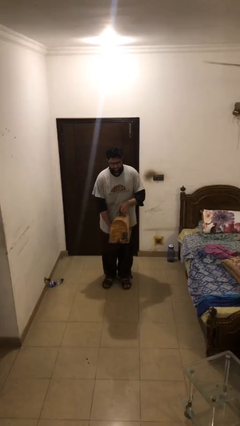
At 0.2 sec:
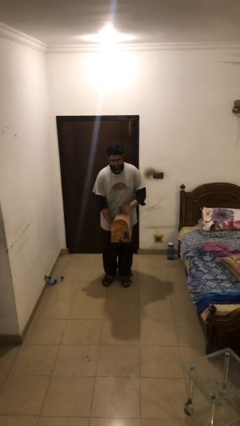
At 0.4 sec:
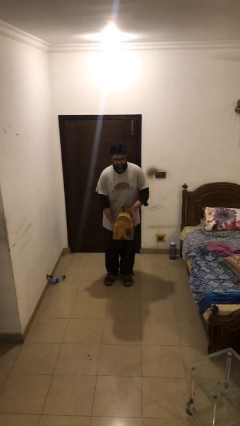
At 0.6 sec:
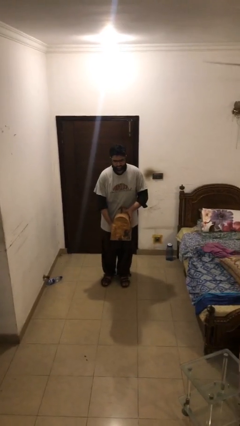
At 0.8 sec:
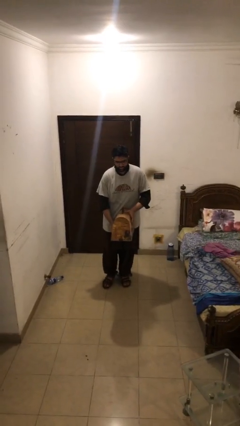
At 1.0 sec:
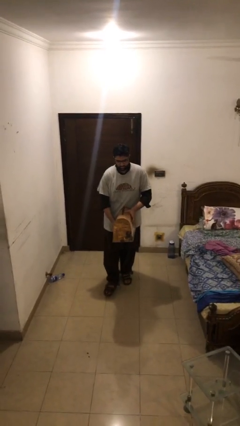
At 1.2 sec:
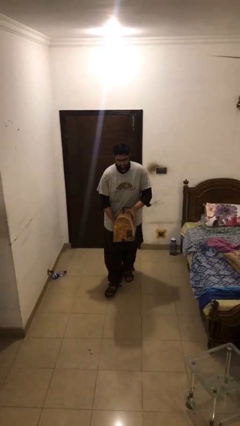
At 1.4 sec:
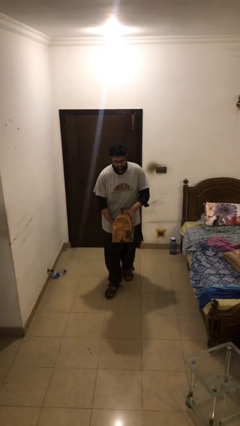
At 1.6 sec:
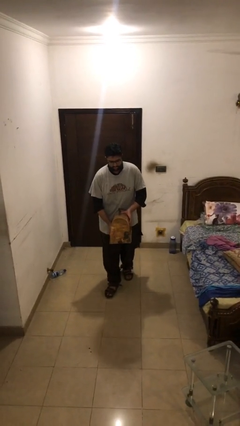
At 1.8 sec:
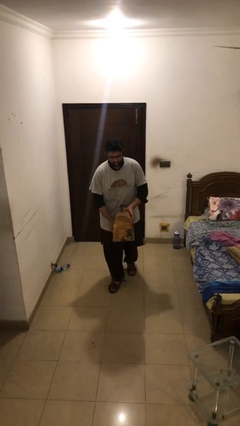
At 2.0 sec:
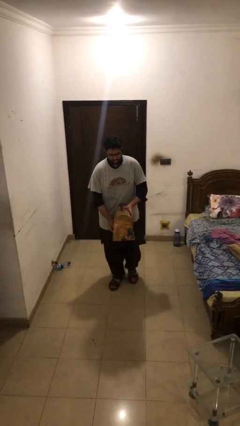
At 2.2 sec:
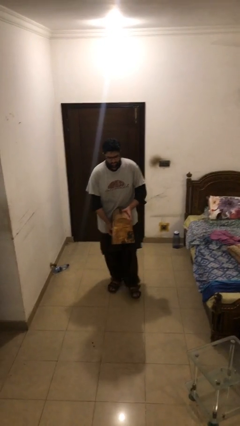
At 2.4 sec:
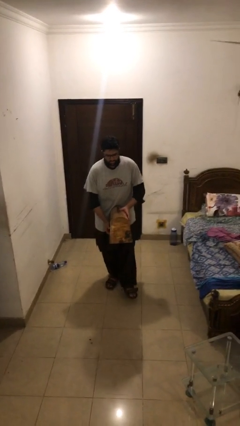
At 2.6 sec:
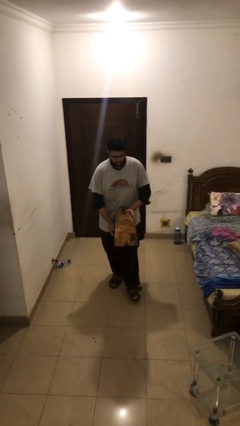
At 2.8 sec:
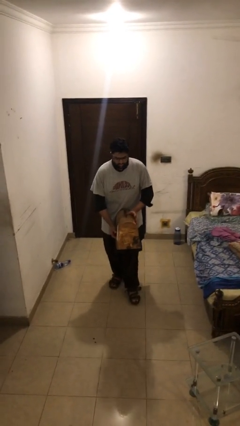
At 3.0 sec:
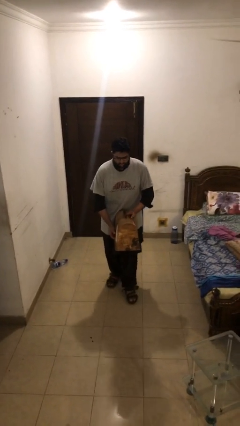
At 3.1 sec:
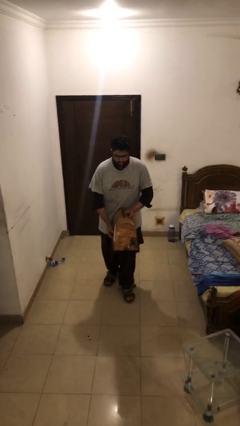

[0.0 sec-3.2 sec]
person carries heavy object

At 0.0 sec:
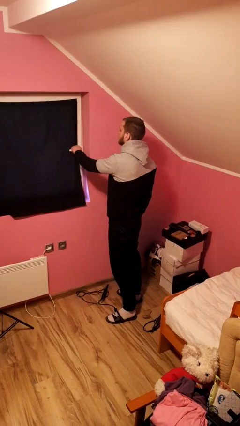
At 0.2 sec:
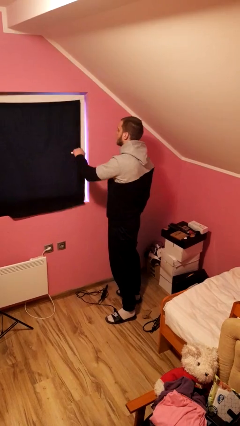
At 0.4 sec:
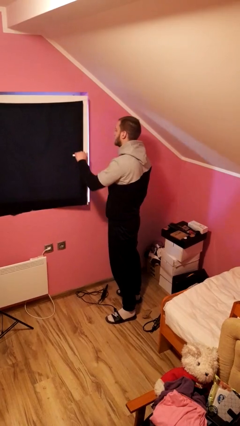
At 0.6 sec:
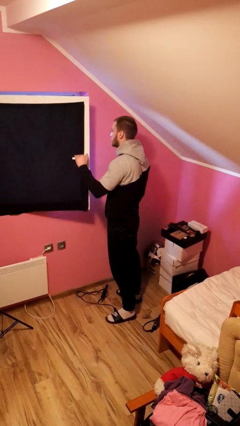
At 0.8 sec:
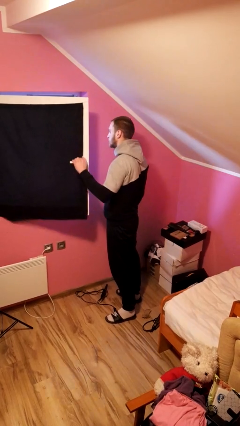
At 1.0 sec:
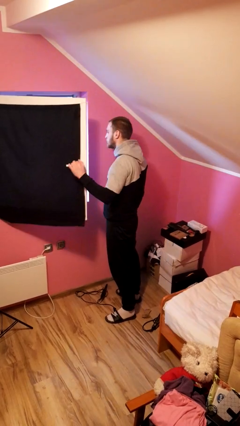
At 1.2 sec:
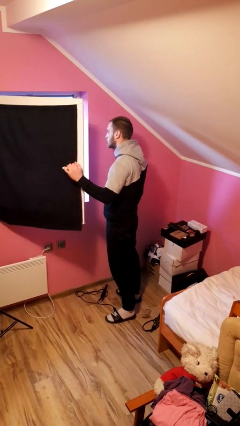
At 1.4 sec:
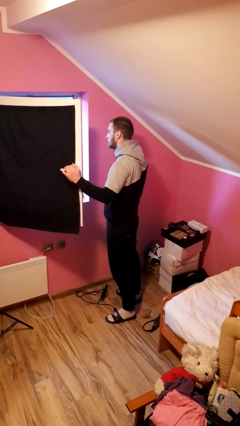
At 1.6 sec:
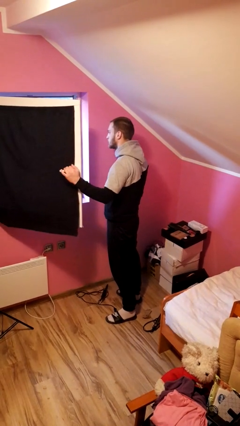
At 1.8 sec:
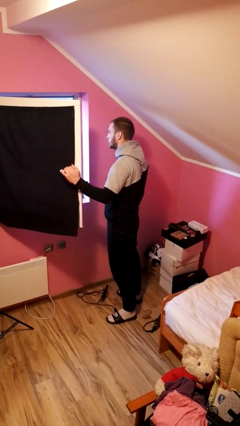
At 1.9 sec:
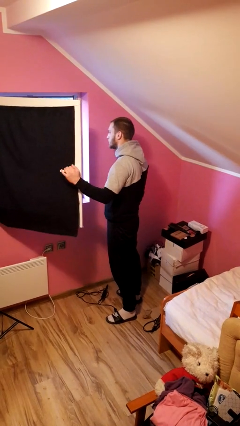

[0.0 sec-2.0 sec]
person opens home window

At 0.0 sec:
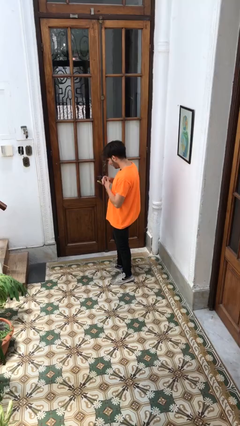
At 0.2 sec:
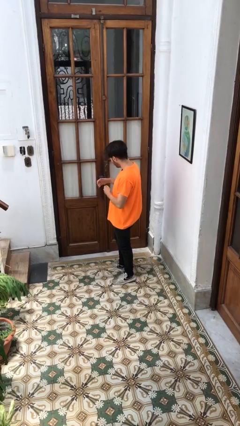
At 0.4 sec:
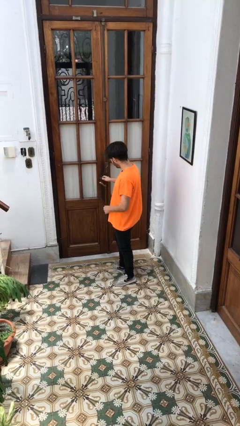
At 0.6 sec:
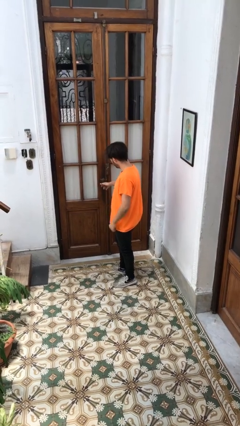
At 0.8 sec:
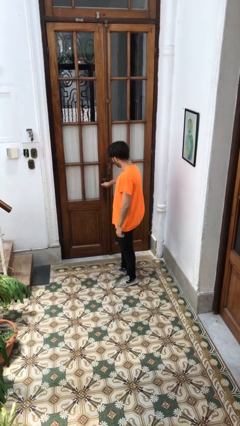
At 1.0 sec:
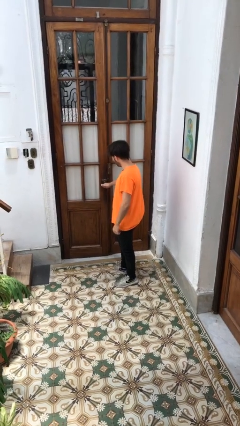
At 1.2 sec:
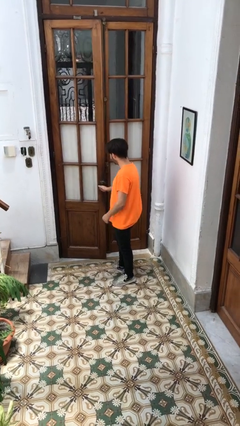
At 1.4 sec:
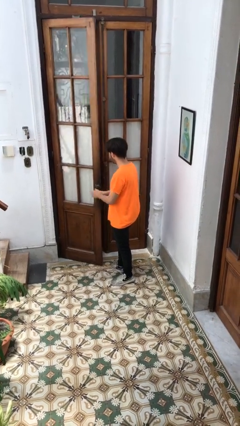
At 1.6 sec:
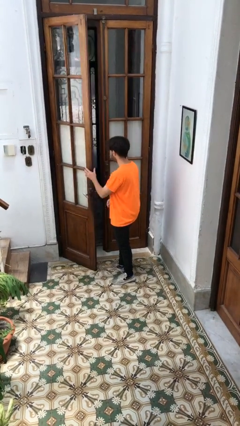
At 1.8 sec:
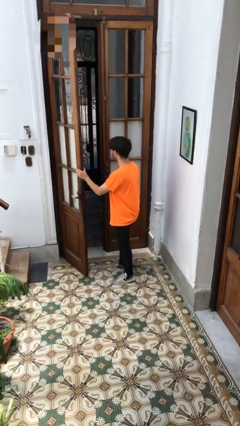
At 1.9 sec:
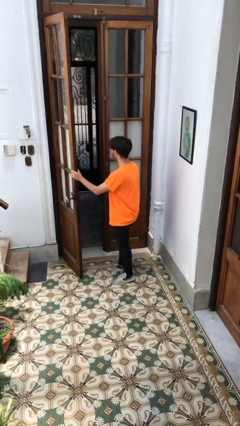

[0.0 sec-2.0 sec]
person opens facility door

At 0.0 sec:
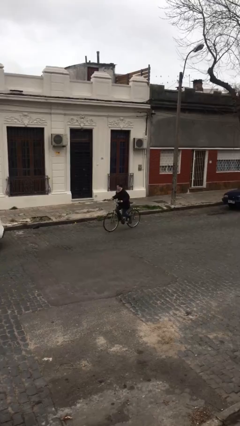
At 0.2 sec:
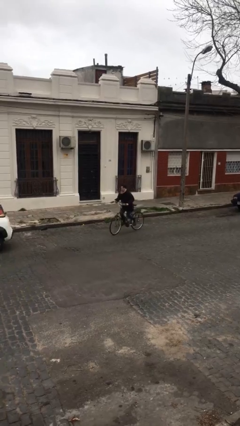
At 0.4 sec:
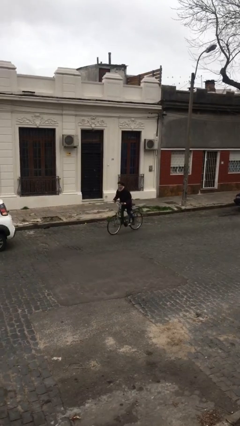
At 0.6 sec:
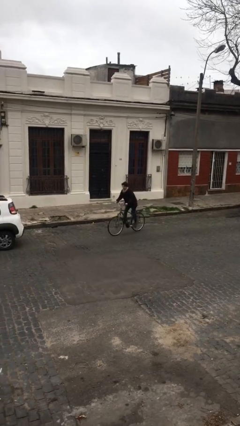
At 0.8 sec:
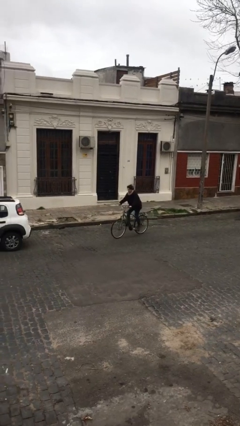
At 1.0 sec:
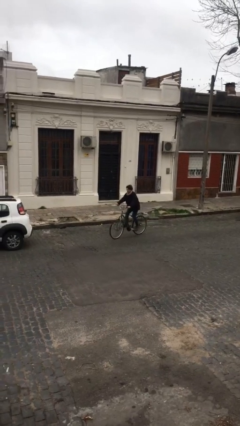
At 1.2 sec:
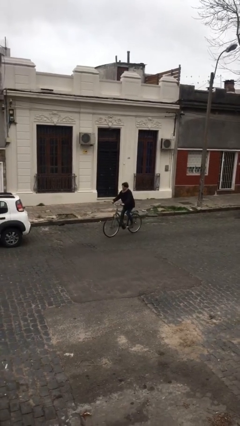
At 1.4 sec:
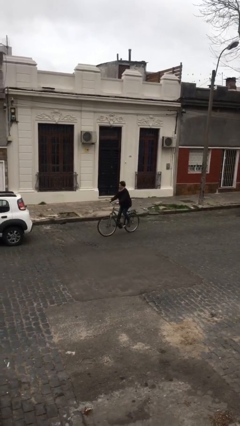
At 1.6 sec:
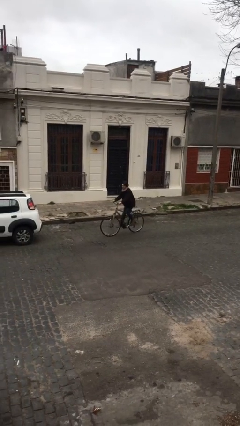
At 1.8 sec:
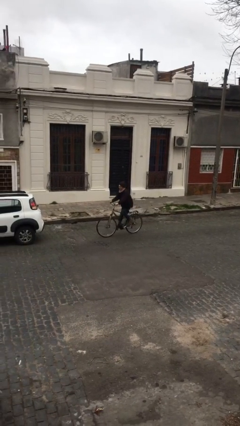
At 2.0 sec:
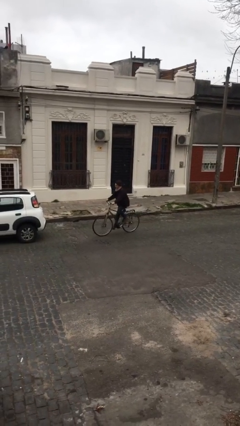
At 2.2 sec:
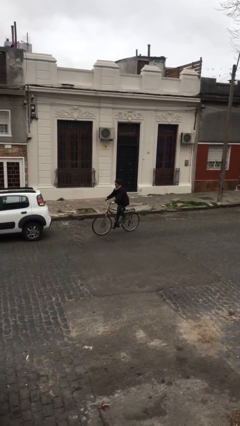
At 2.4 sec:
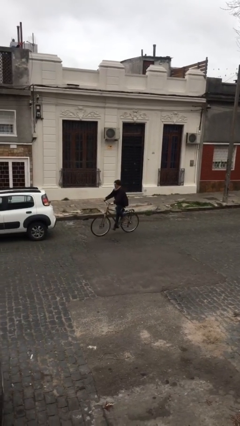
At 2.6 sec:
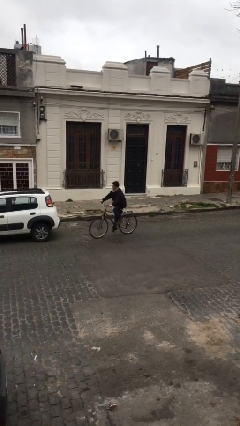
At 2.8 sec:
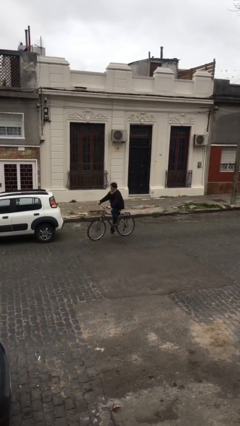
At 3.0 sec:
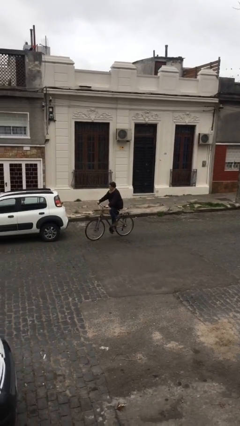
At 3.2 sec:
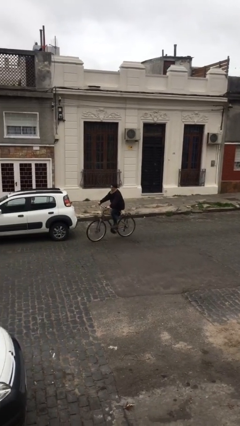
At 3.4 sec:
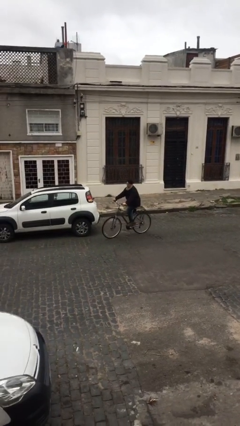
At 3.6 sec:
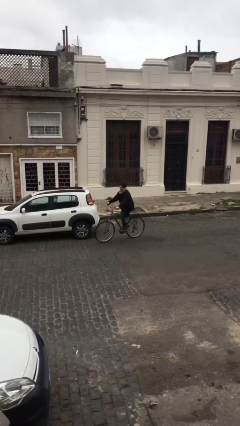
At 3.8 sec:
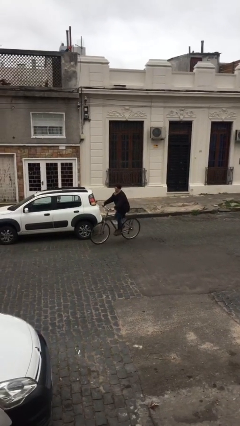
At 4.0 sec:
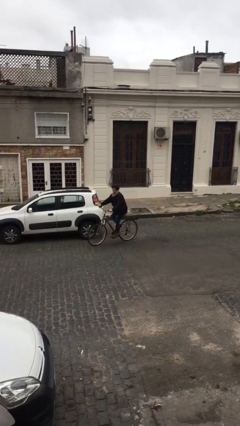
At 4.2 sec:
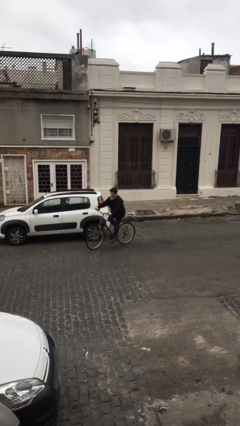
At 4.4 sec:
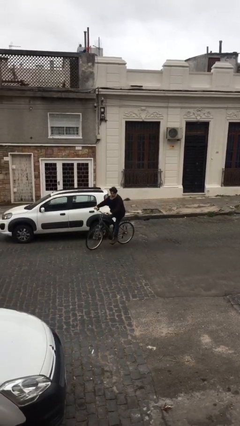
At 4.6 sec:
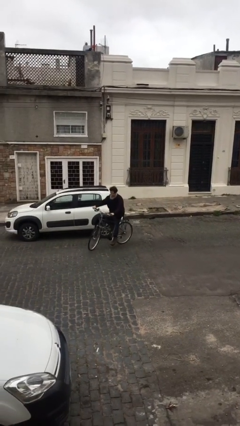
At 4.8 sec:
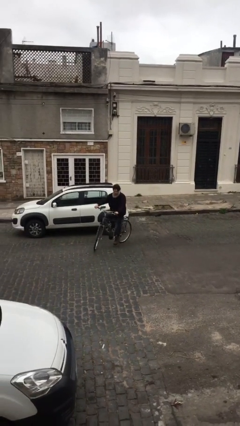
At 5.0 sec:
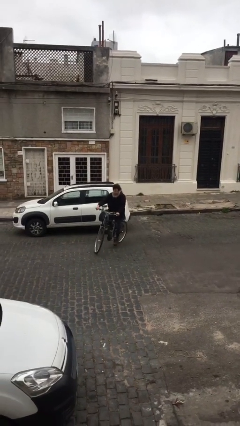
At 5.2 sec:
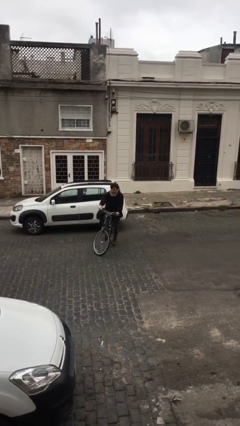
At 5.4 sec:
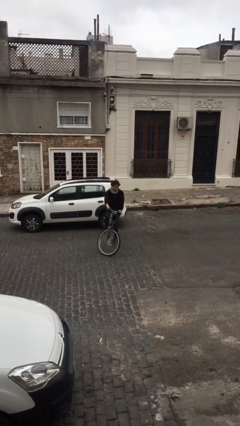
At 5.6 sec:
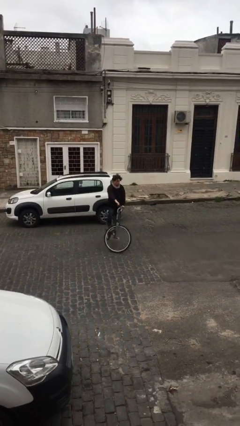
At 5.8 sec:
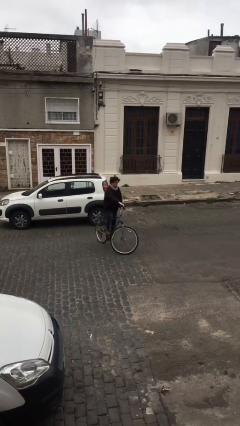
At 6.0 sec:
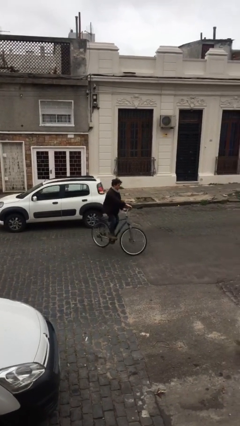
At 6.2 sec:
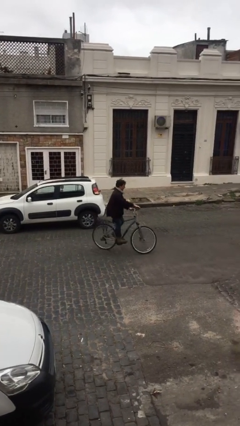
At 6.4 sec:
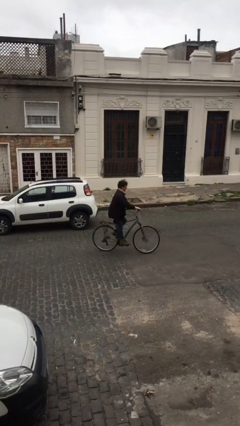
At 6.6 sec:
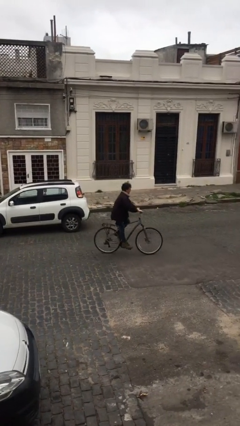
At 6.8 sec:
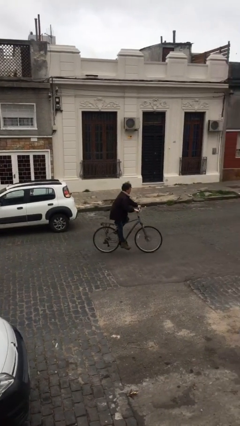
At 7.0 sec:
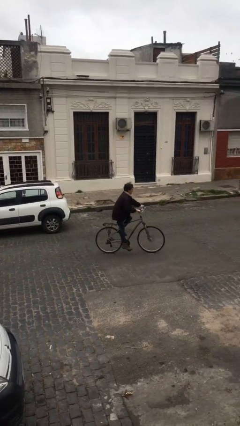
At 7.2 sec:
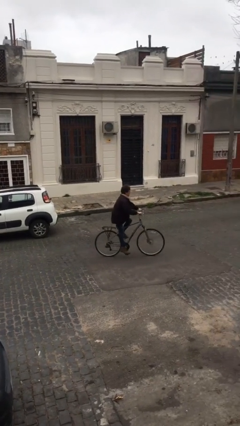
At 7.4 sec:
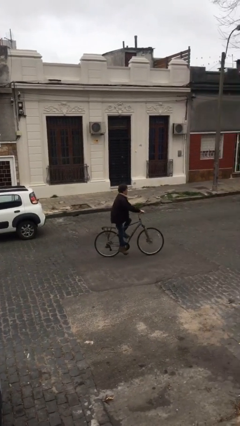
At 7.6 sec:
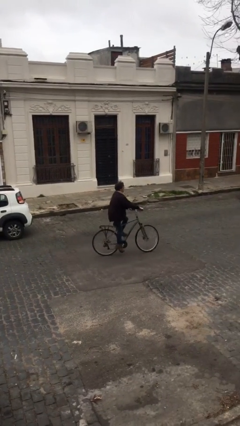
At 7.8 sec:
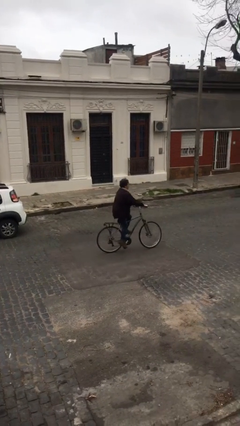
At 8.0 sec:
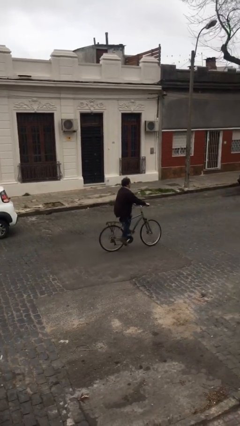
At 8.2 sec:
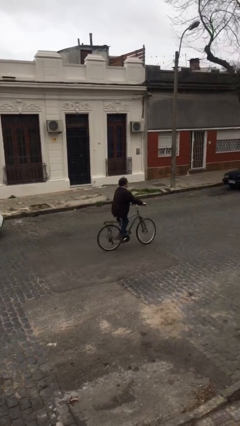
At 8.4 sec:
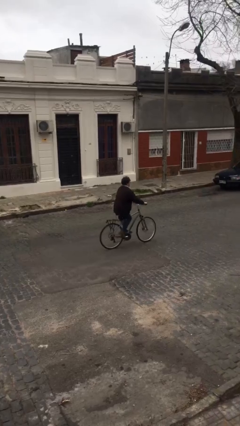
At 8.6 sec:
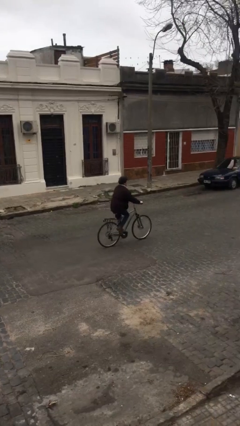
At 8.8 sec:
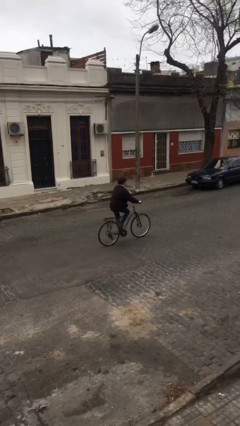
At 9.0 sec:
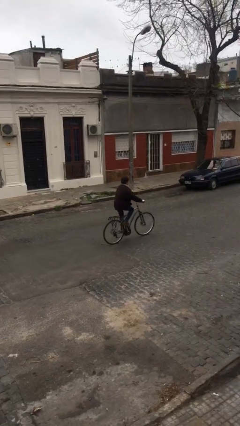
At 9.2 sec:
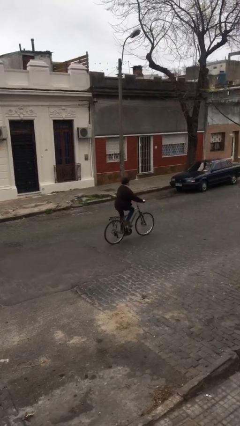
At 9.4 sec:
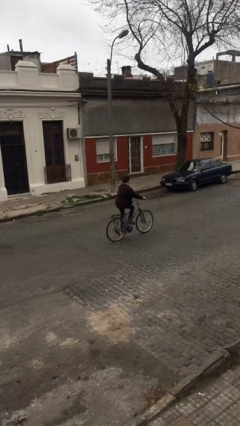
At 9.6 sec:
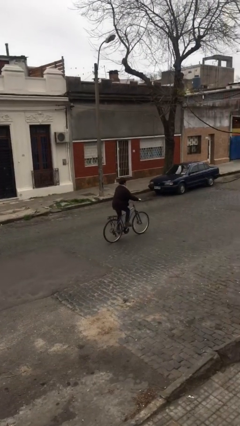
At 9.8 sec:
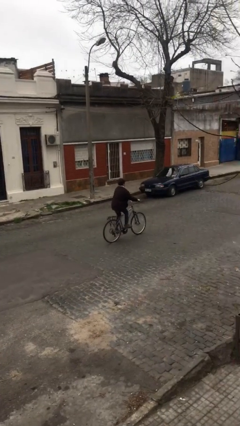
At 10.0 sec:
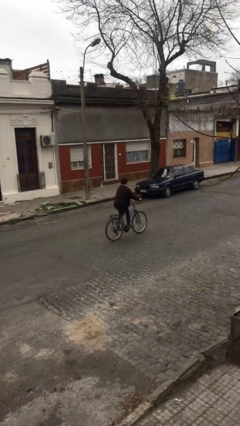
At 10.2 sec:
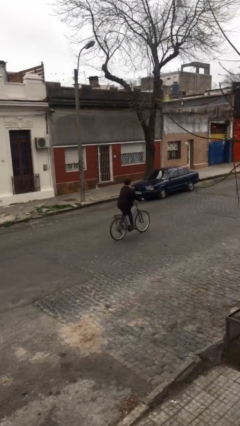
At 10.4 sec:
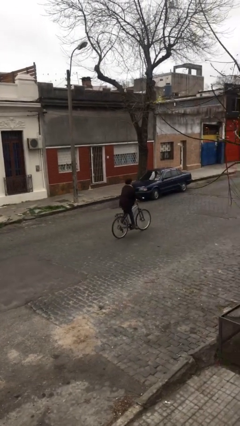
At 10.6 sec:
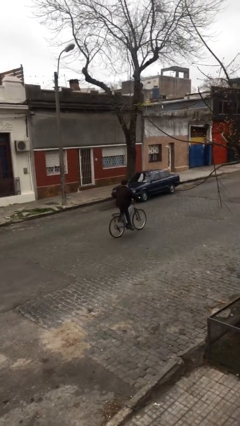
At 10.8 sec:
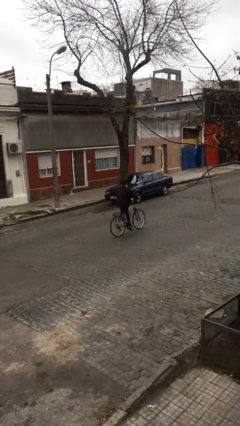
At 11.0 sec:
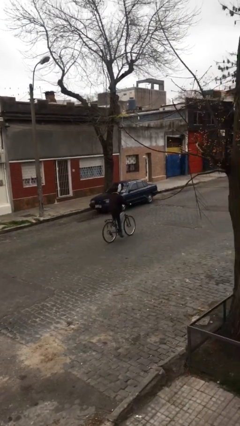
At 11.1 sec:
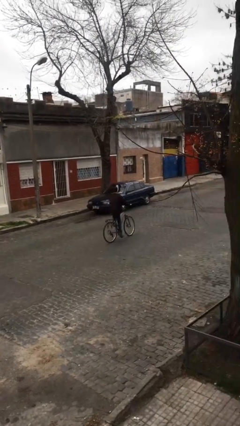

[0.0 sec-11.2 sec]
person rides bicycle
